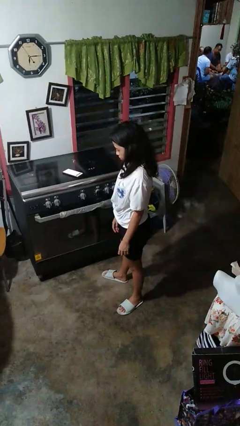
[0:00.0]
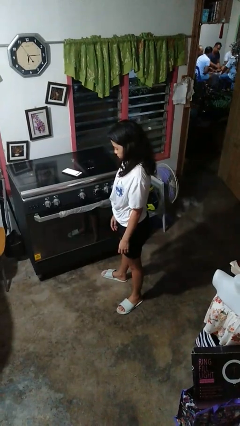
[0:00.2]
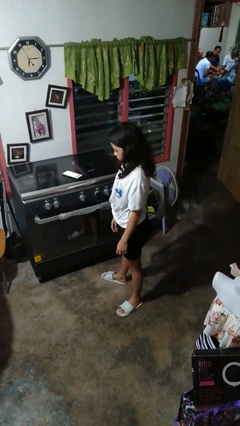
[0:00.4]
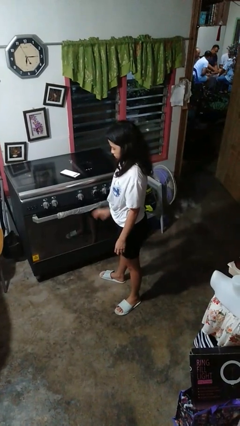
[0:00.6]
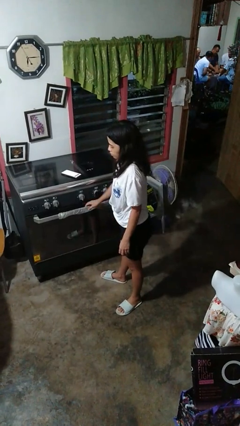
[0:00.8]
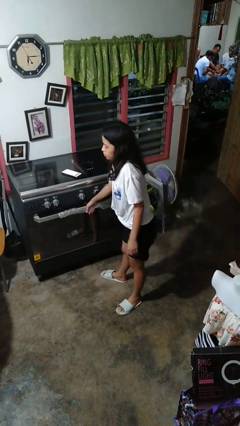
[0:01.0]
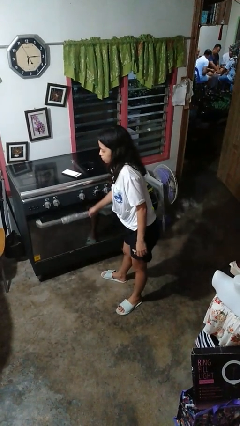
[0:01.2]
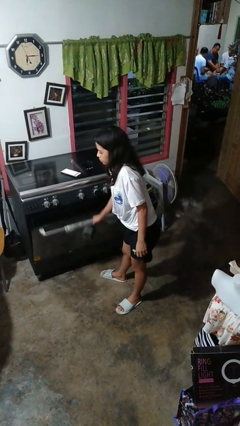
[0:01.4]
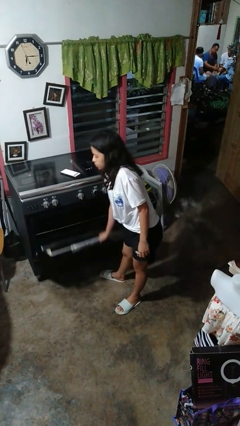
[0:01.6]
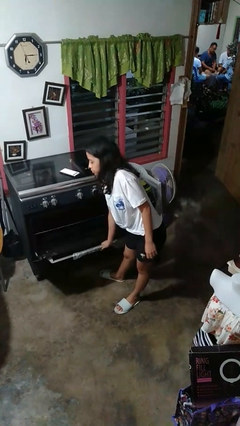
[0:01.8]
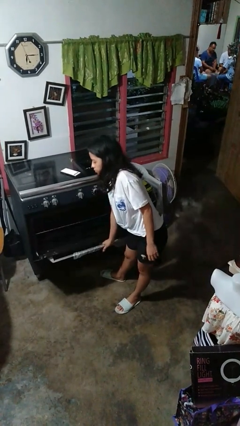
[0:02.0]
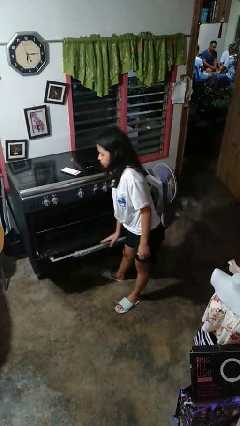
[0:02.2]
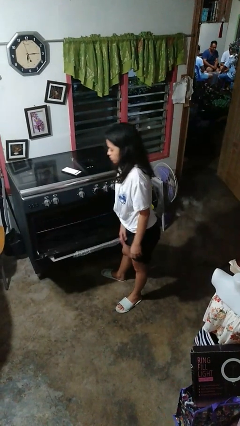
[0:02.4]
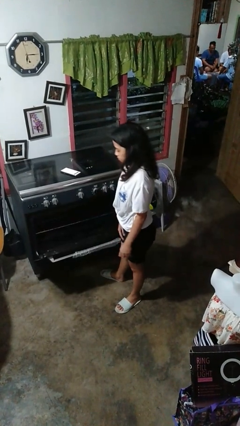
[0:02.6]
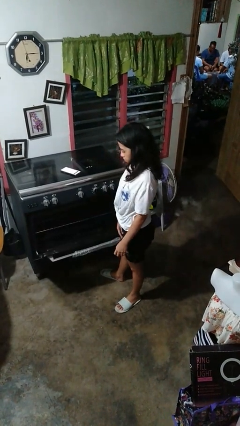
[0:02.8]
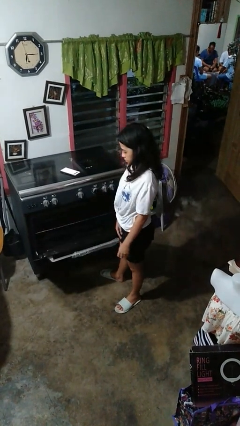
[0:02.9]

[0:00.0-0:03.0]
person opens oven door

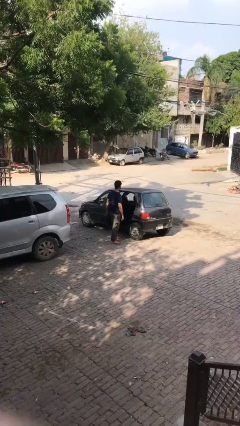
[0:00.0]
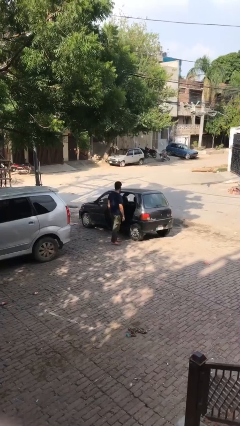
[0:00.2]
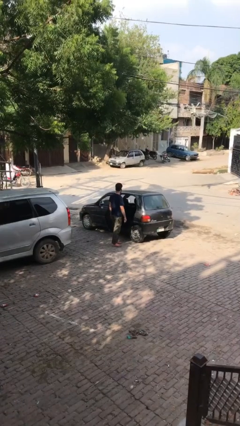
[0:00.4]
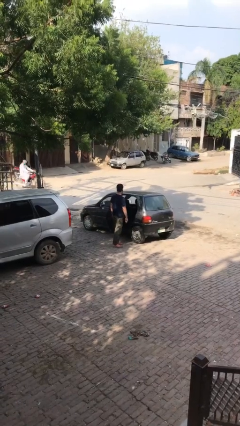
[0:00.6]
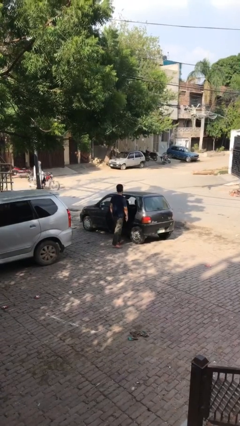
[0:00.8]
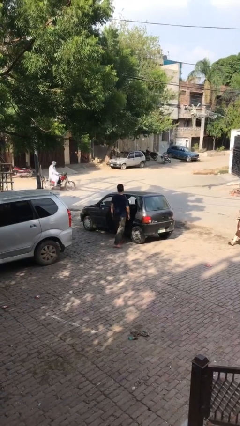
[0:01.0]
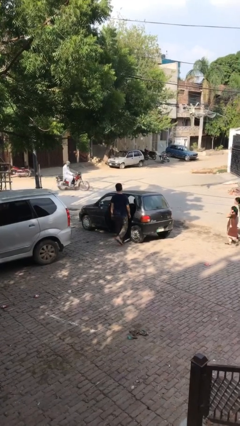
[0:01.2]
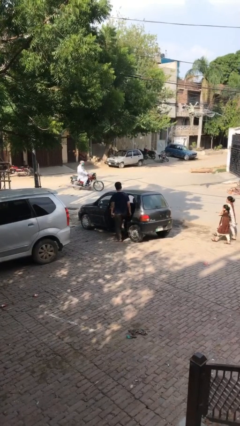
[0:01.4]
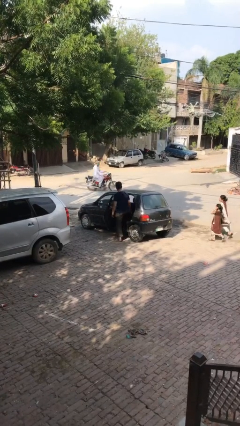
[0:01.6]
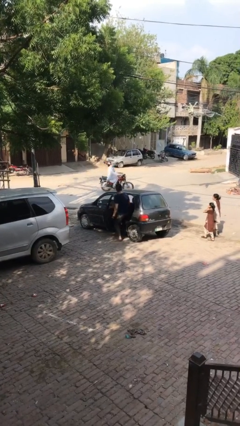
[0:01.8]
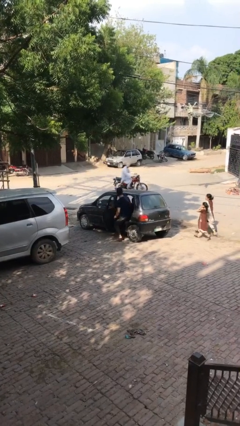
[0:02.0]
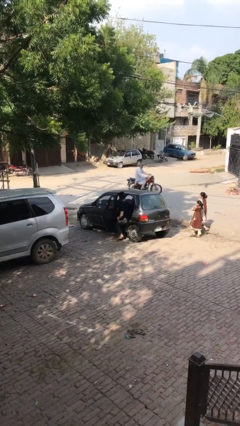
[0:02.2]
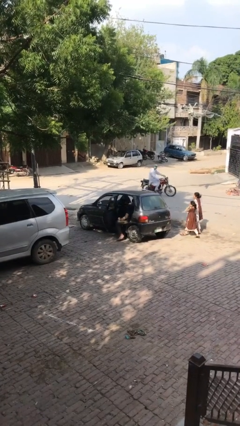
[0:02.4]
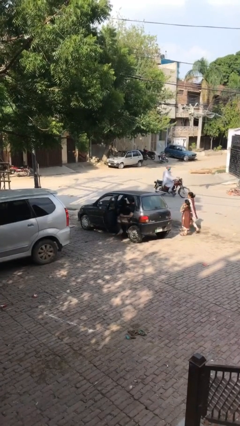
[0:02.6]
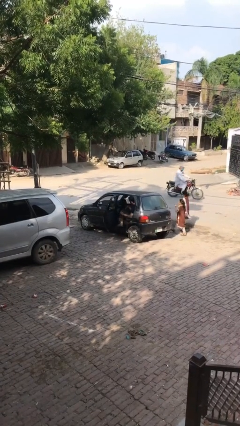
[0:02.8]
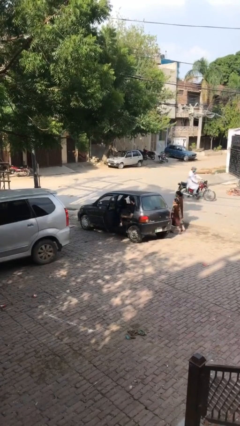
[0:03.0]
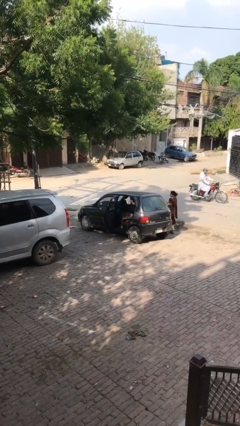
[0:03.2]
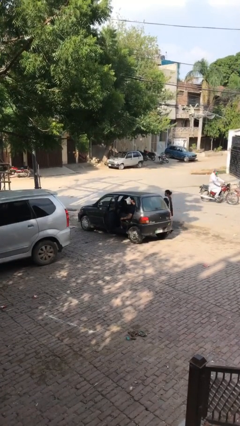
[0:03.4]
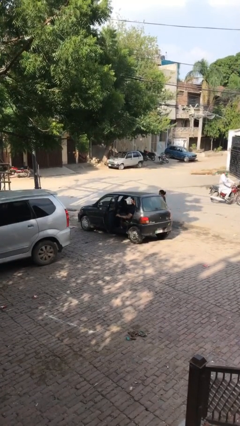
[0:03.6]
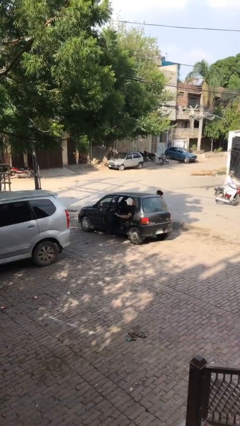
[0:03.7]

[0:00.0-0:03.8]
person enters car

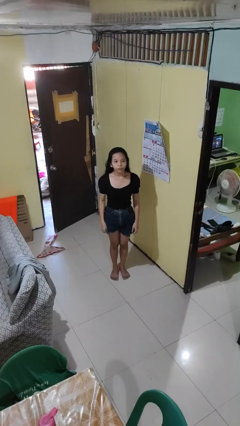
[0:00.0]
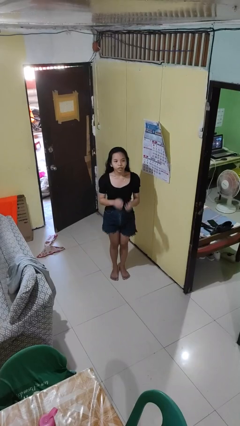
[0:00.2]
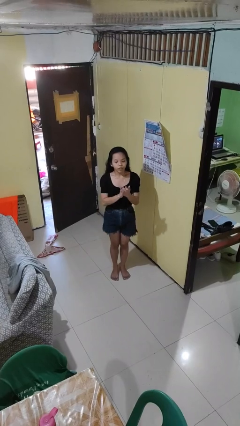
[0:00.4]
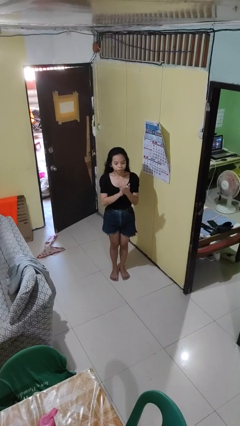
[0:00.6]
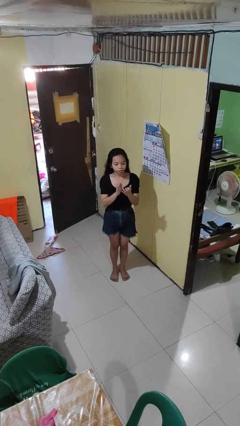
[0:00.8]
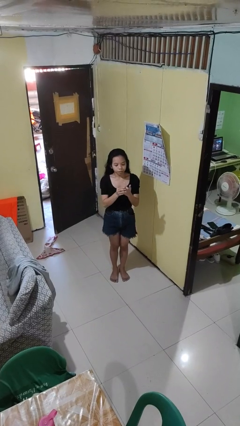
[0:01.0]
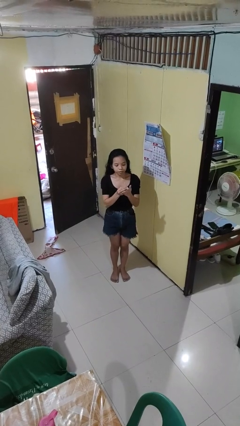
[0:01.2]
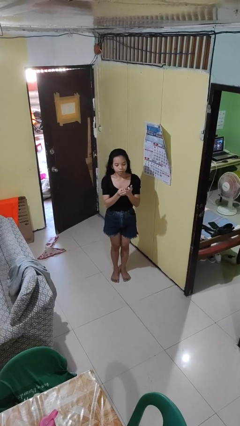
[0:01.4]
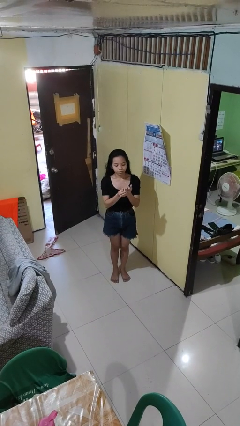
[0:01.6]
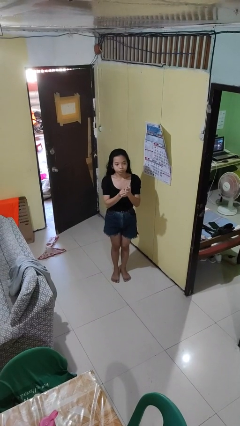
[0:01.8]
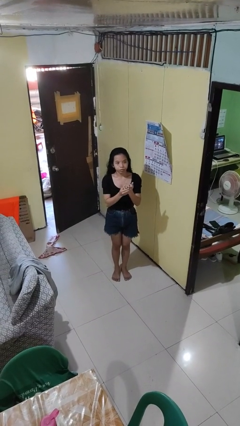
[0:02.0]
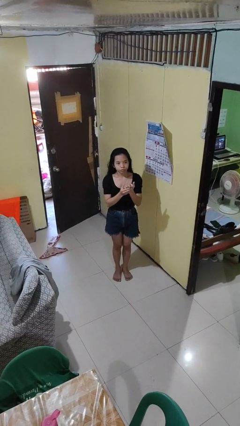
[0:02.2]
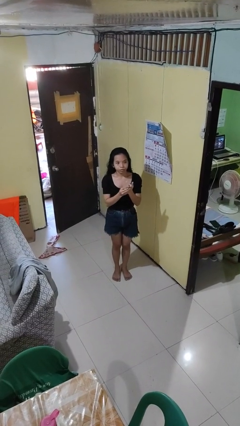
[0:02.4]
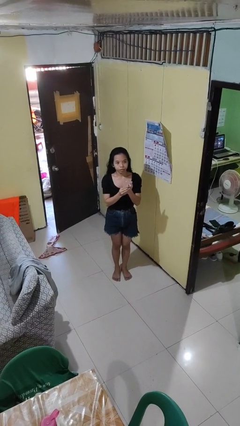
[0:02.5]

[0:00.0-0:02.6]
person cracks knuckles

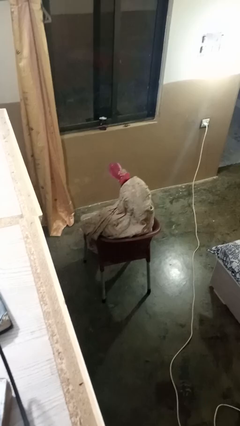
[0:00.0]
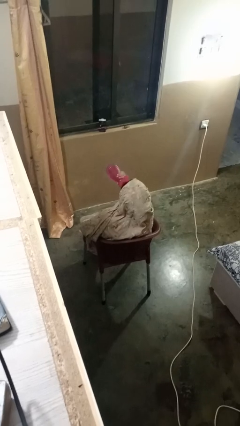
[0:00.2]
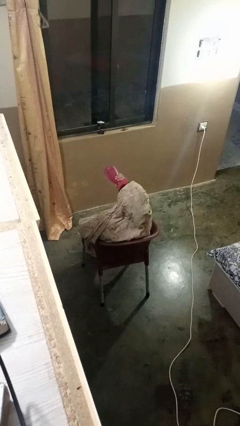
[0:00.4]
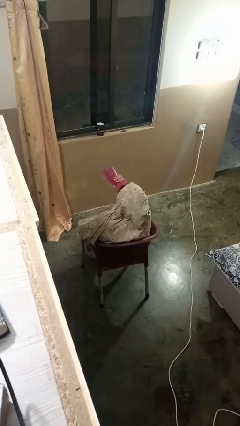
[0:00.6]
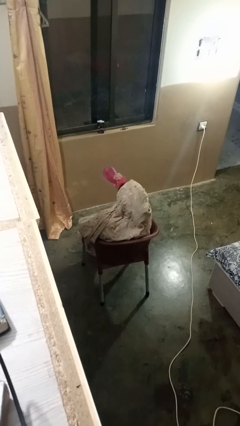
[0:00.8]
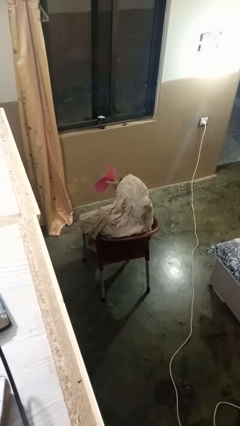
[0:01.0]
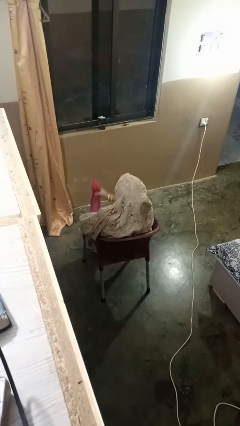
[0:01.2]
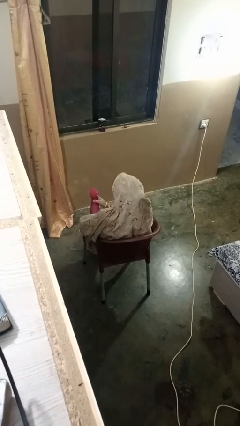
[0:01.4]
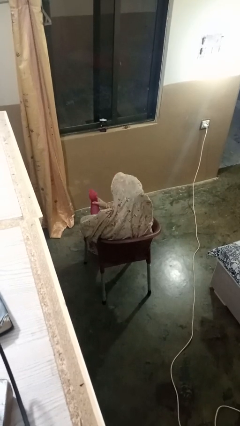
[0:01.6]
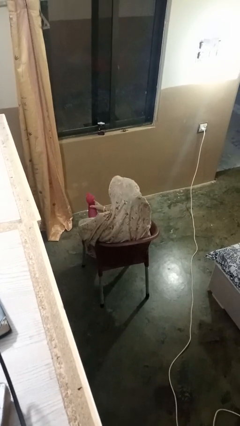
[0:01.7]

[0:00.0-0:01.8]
person drinks from bottle

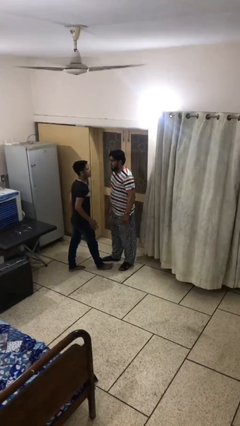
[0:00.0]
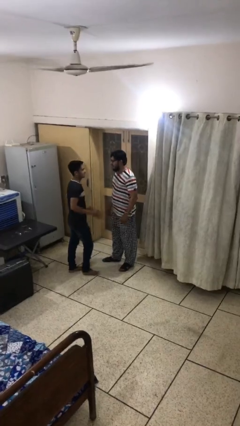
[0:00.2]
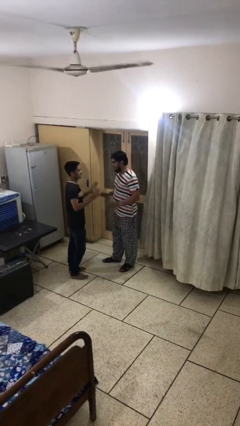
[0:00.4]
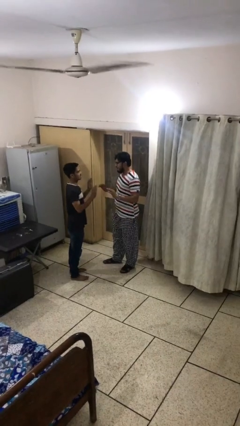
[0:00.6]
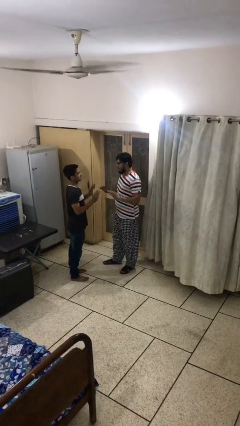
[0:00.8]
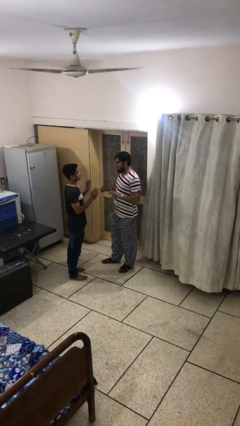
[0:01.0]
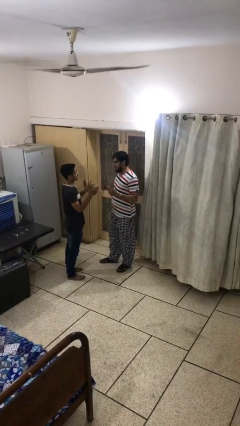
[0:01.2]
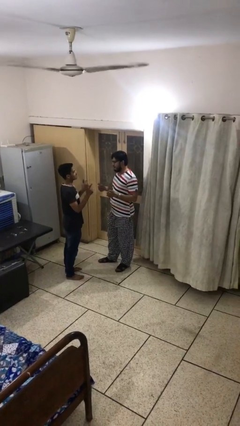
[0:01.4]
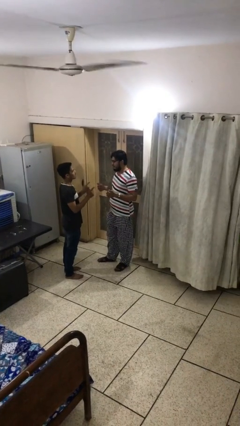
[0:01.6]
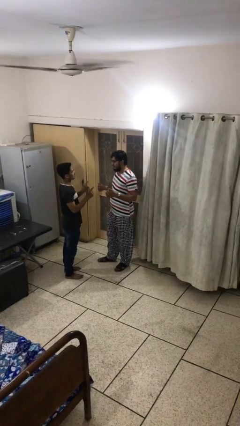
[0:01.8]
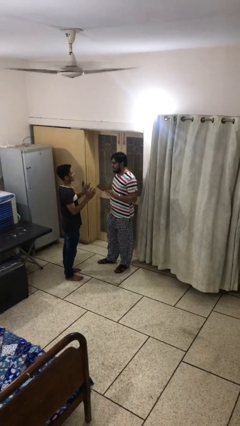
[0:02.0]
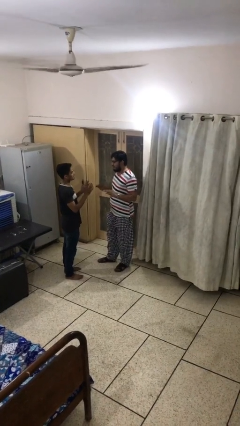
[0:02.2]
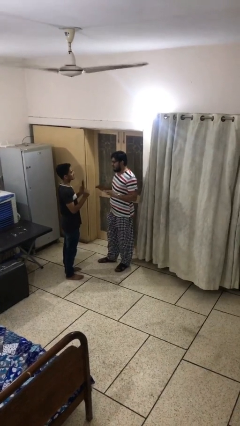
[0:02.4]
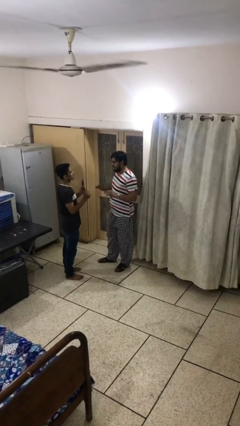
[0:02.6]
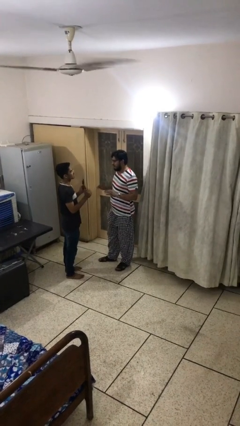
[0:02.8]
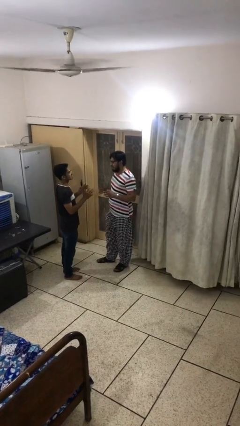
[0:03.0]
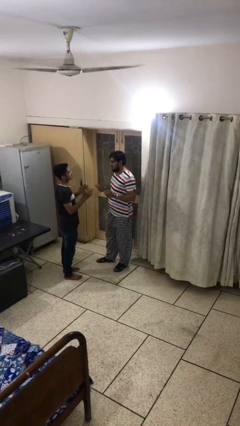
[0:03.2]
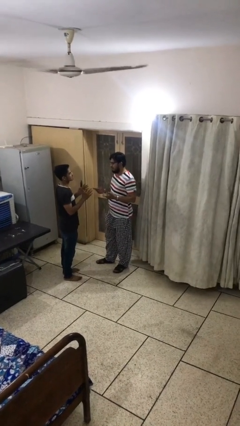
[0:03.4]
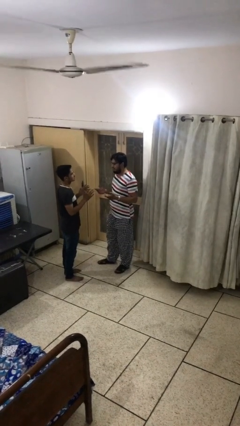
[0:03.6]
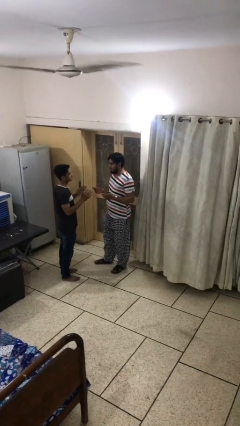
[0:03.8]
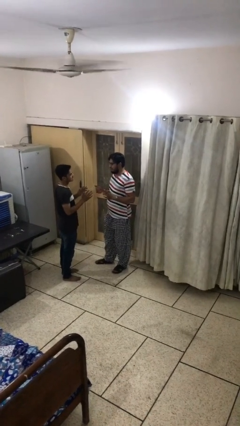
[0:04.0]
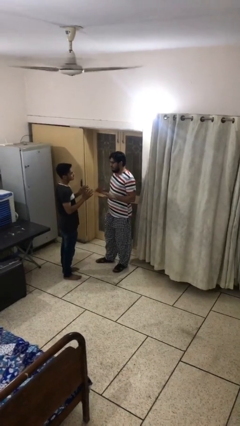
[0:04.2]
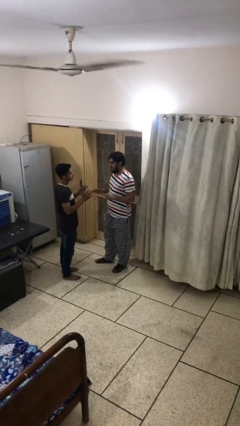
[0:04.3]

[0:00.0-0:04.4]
person talks to person

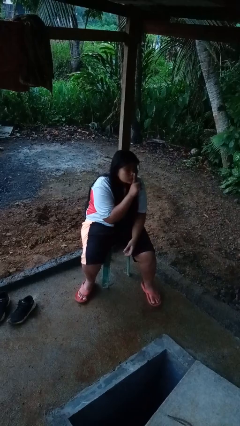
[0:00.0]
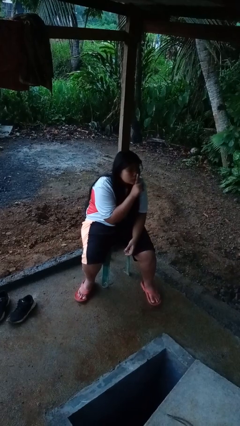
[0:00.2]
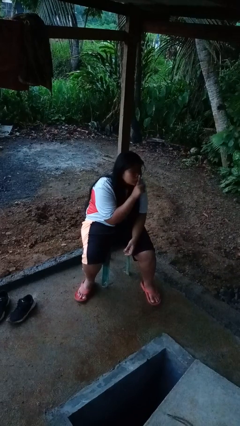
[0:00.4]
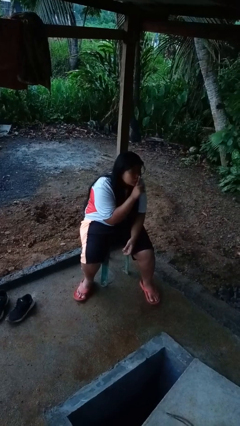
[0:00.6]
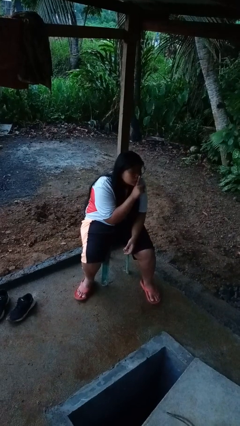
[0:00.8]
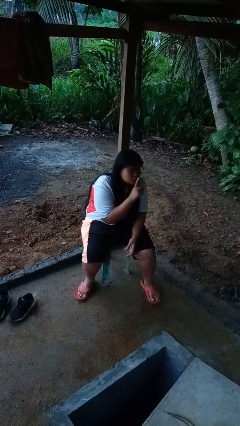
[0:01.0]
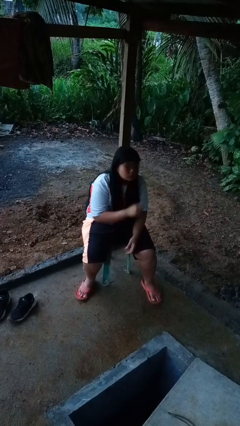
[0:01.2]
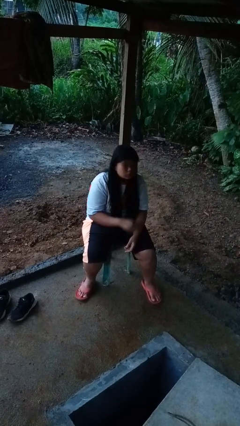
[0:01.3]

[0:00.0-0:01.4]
person gestures be quiet

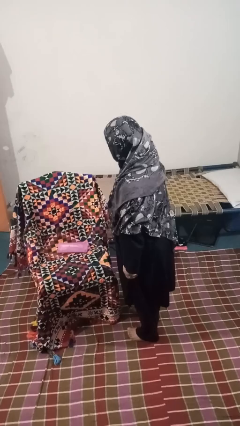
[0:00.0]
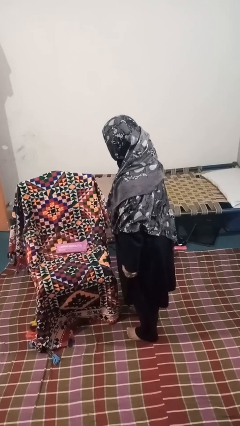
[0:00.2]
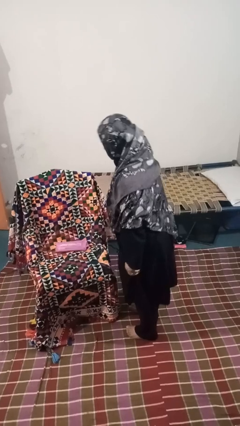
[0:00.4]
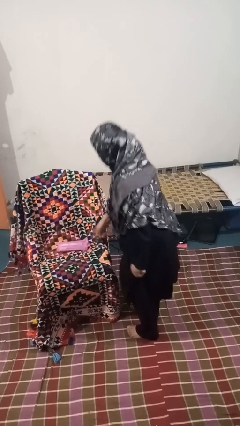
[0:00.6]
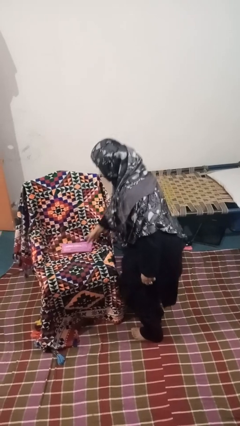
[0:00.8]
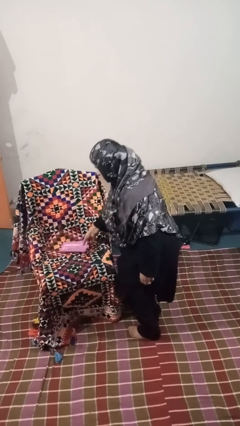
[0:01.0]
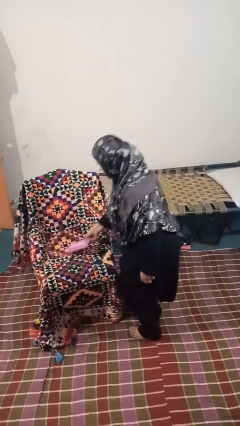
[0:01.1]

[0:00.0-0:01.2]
person puts down object on couch
